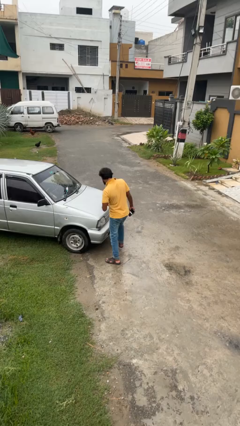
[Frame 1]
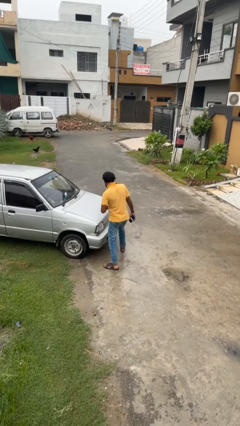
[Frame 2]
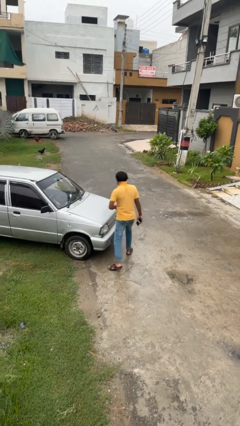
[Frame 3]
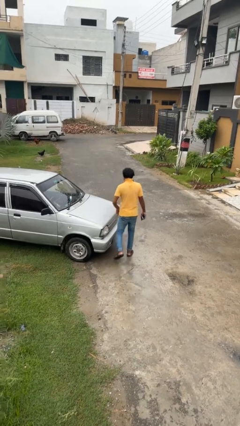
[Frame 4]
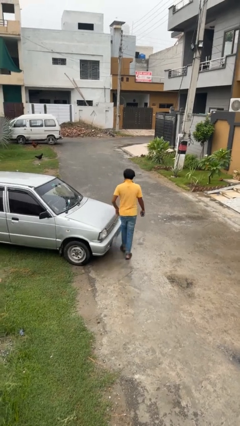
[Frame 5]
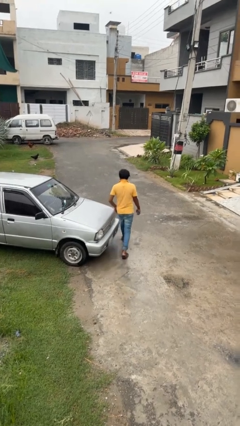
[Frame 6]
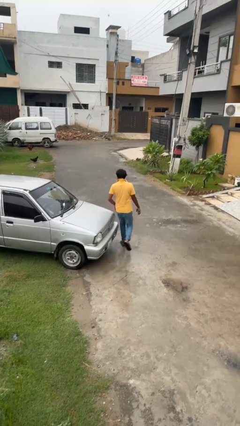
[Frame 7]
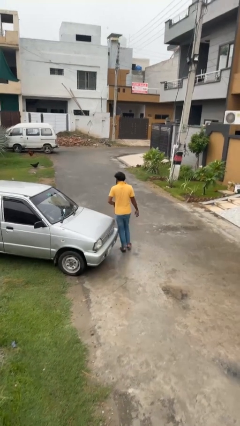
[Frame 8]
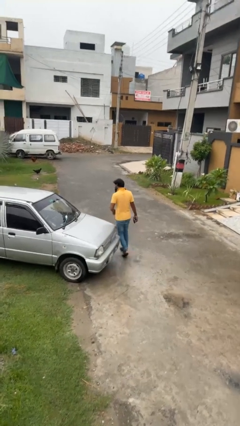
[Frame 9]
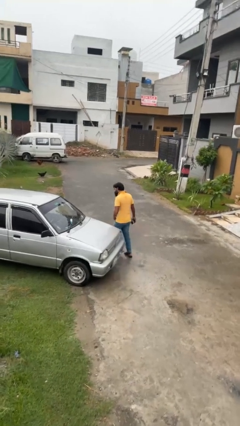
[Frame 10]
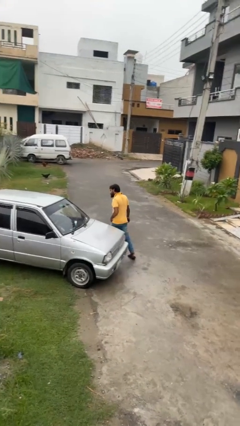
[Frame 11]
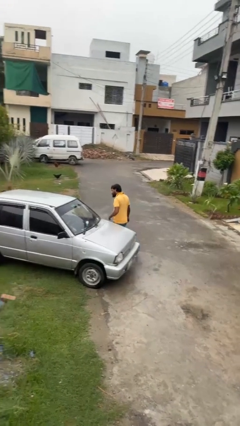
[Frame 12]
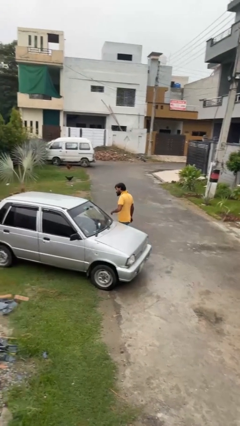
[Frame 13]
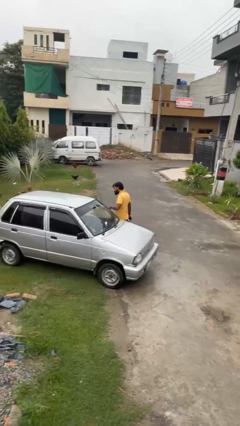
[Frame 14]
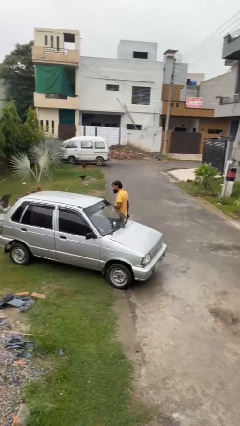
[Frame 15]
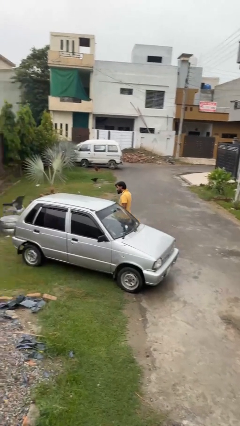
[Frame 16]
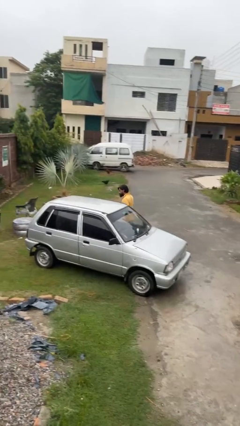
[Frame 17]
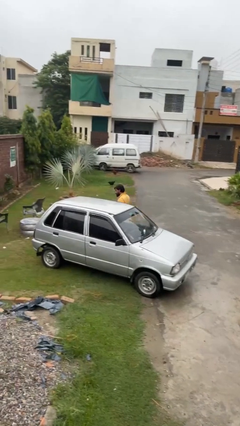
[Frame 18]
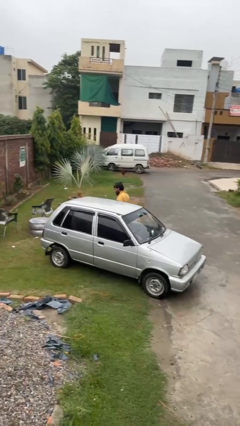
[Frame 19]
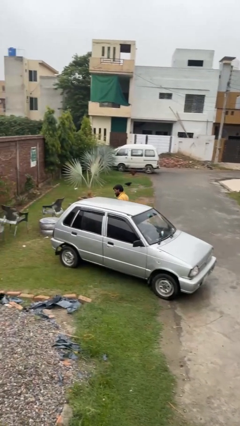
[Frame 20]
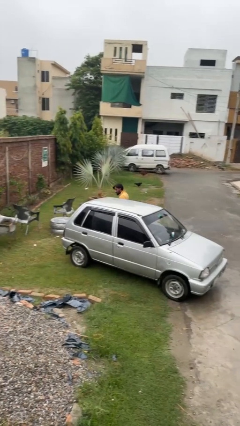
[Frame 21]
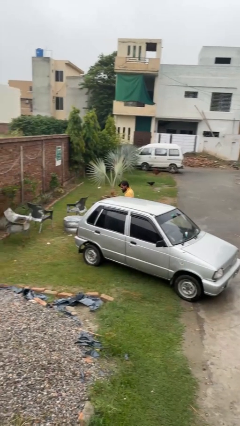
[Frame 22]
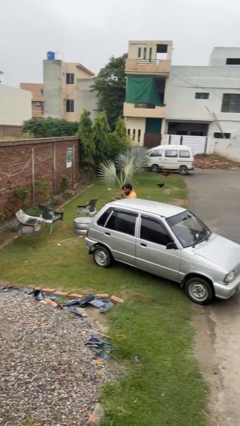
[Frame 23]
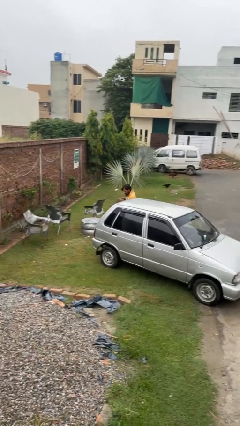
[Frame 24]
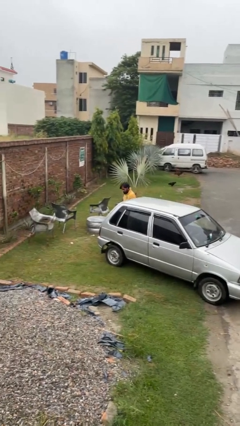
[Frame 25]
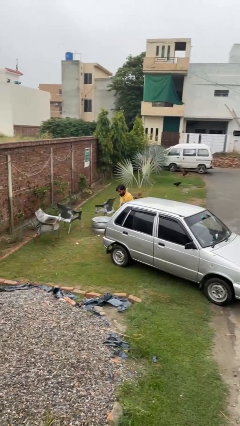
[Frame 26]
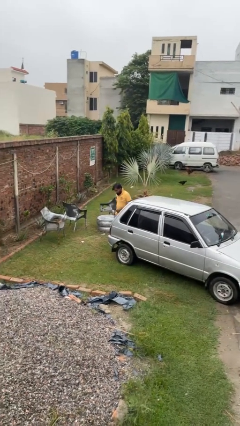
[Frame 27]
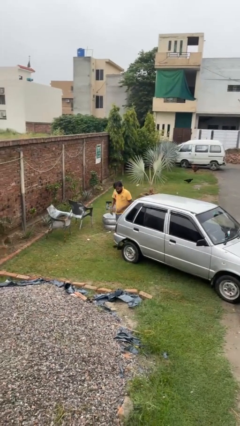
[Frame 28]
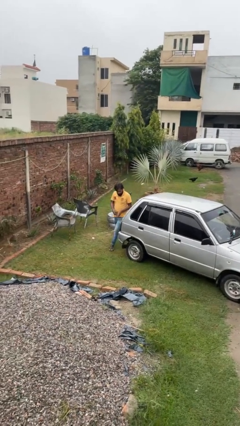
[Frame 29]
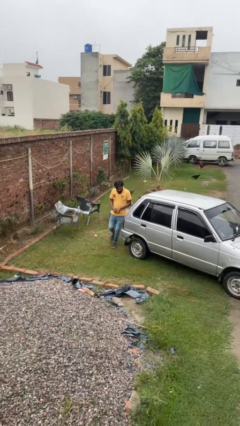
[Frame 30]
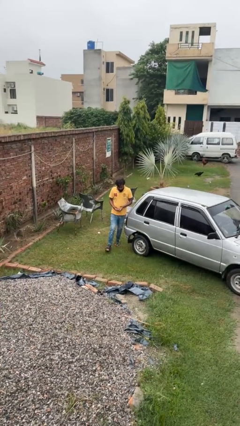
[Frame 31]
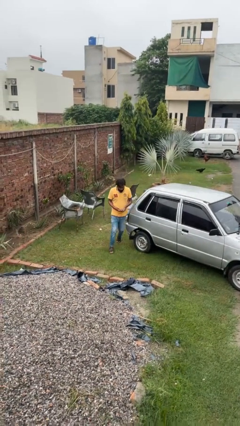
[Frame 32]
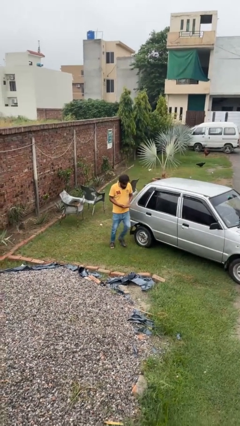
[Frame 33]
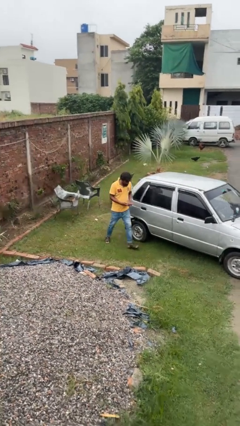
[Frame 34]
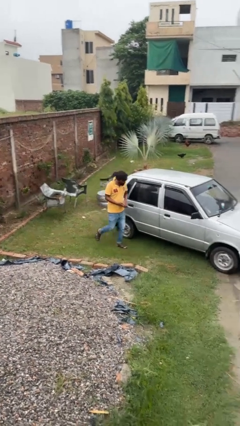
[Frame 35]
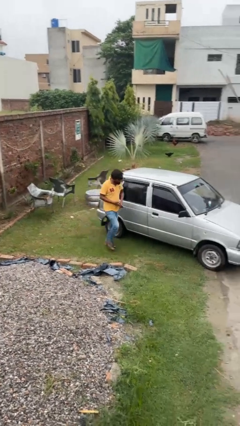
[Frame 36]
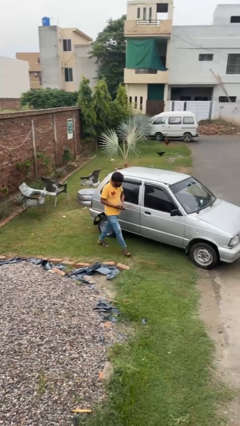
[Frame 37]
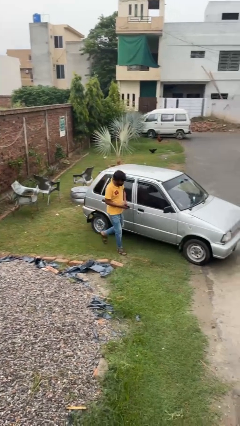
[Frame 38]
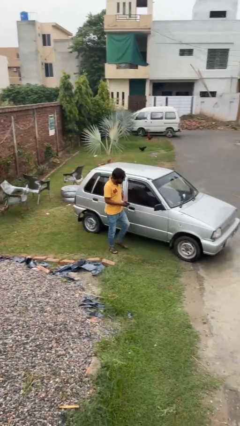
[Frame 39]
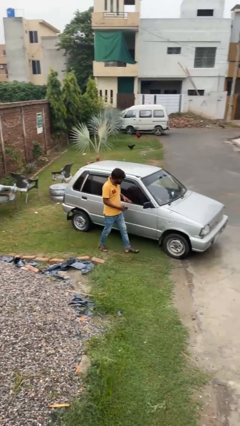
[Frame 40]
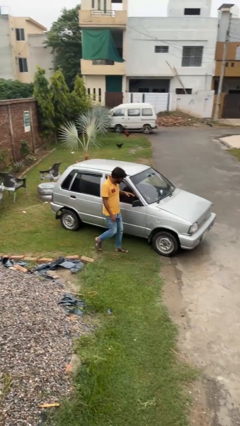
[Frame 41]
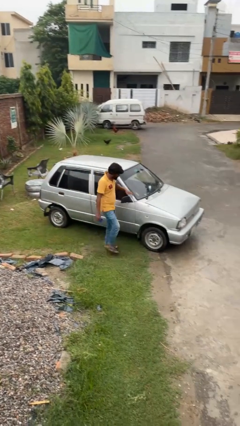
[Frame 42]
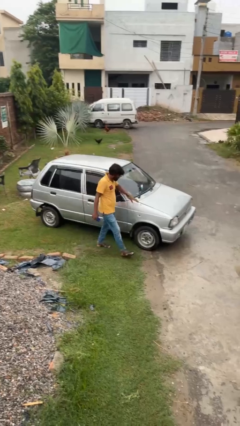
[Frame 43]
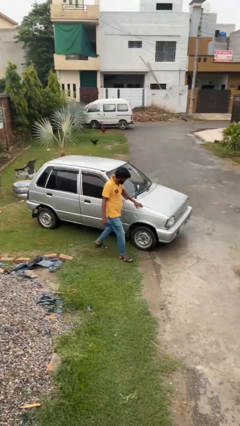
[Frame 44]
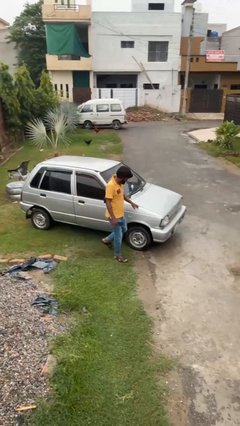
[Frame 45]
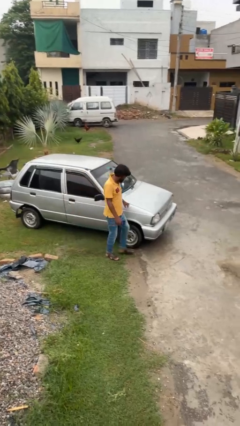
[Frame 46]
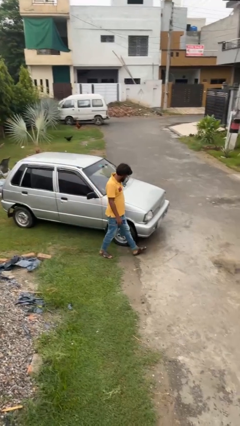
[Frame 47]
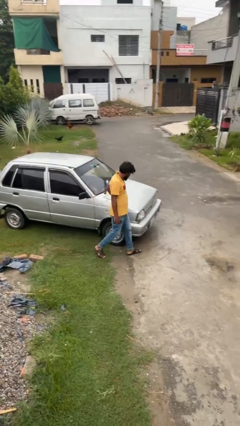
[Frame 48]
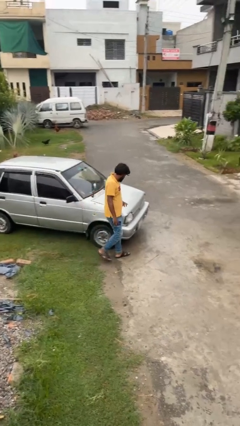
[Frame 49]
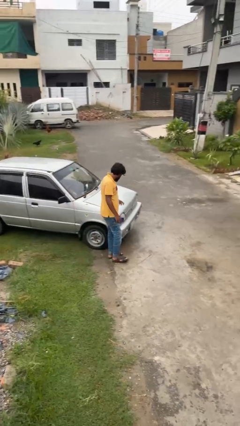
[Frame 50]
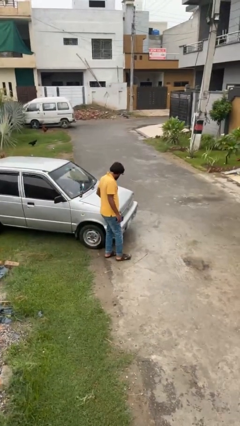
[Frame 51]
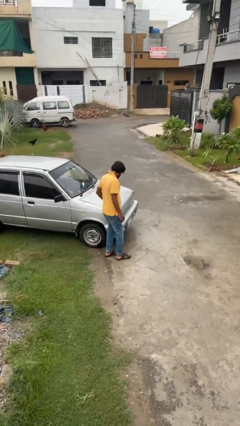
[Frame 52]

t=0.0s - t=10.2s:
person walks around car

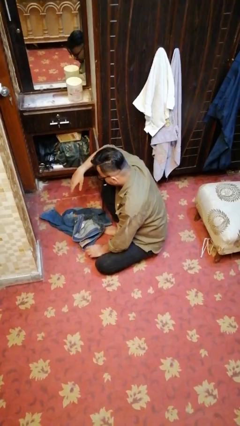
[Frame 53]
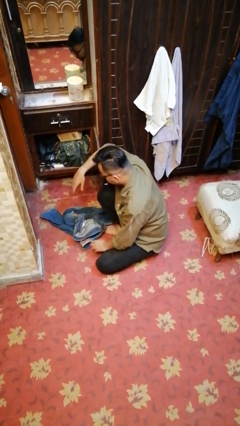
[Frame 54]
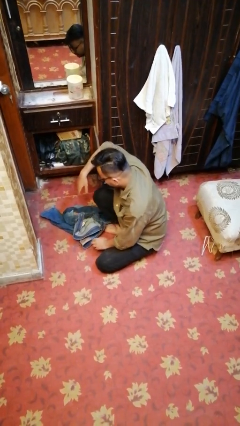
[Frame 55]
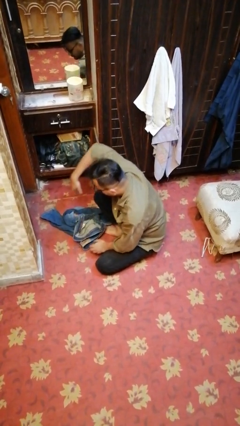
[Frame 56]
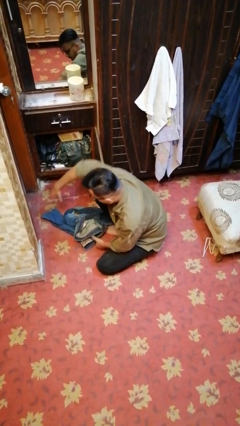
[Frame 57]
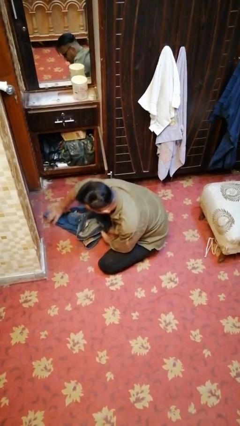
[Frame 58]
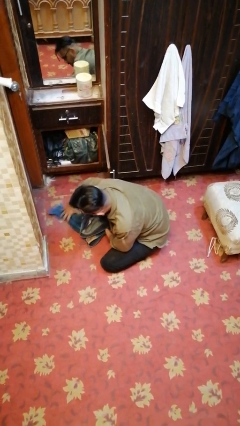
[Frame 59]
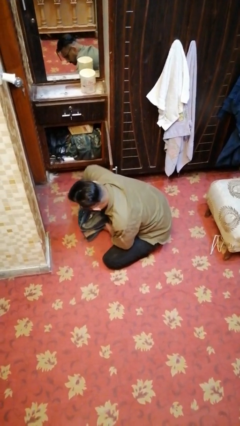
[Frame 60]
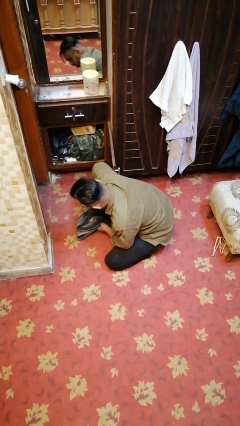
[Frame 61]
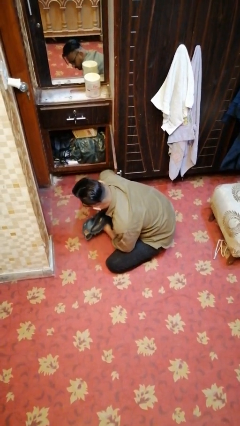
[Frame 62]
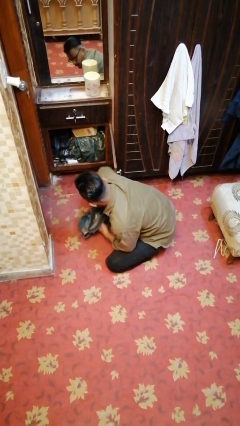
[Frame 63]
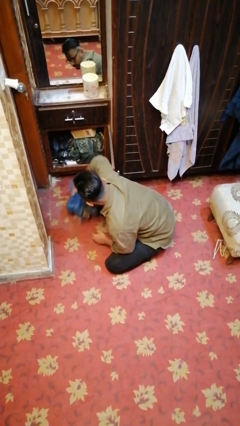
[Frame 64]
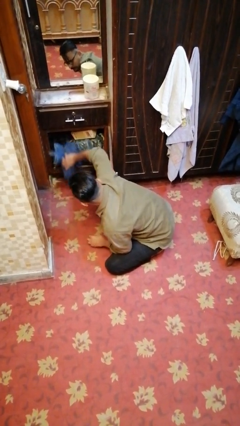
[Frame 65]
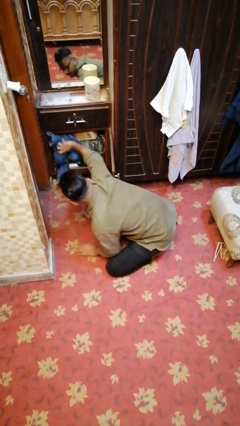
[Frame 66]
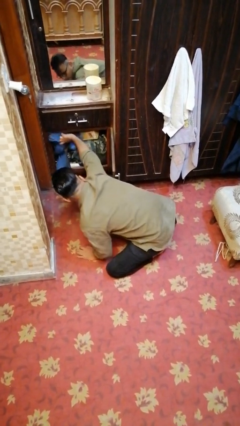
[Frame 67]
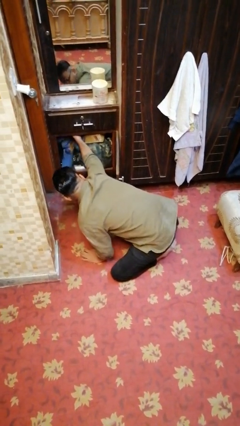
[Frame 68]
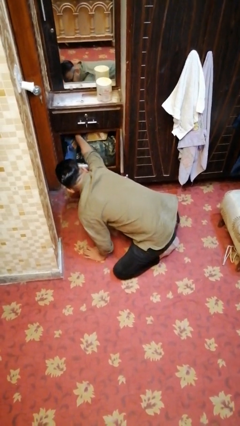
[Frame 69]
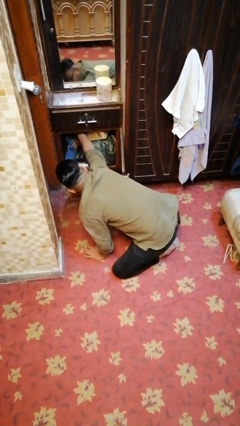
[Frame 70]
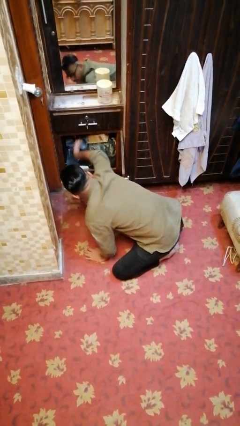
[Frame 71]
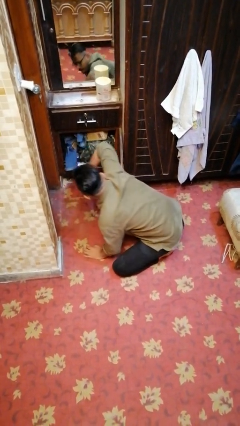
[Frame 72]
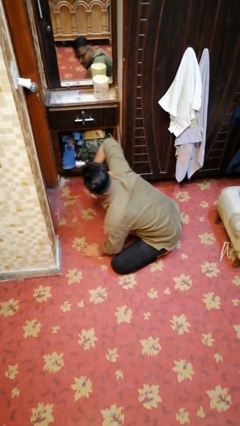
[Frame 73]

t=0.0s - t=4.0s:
person puts clothes into dresser

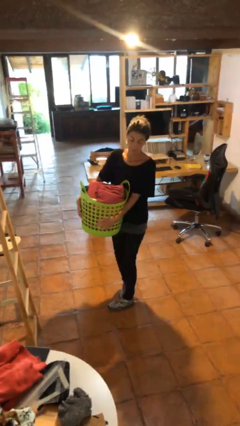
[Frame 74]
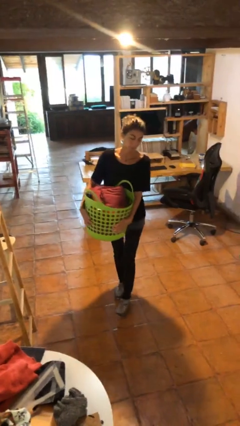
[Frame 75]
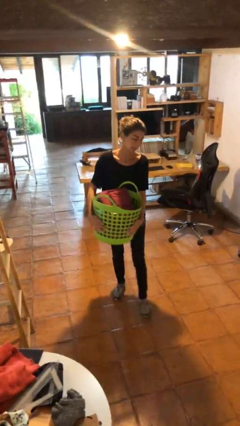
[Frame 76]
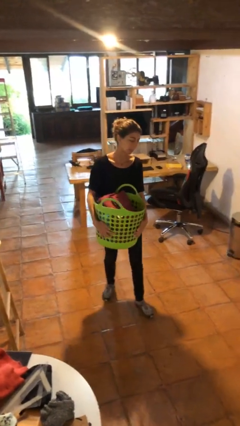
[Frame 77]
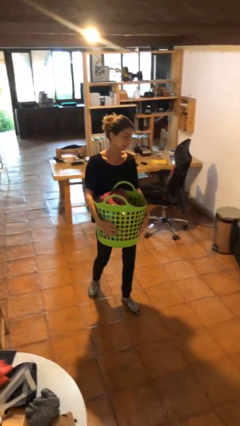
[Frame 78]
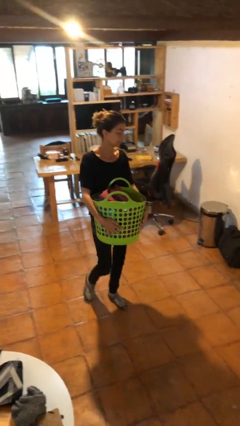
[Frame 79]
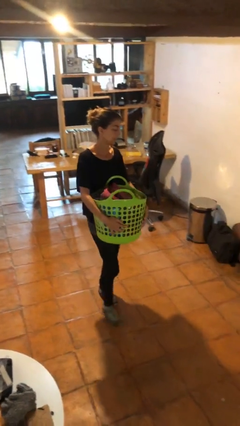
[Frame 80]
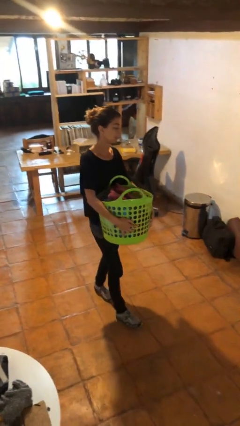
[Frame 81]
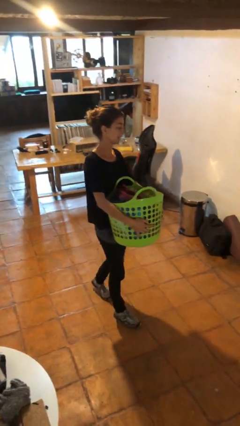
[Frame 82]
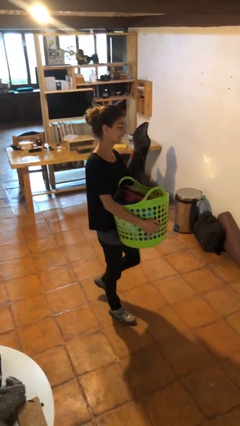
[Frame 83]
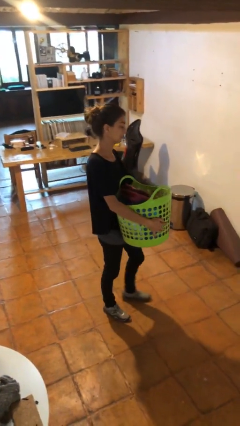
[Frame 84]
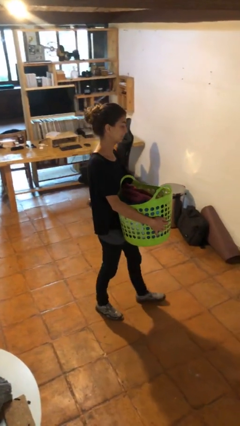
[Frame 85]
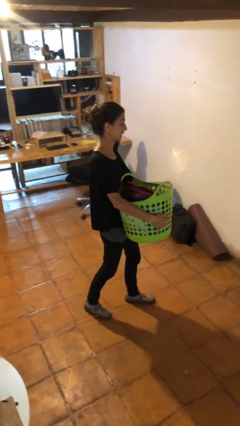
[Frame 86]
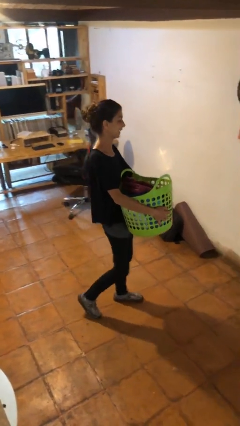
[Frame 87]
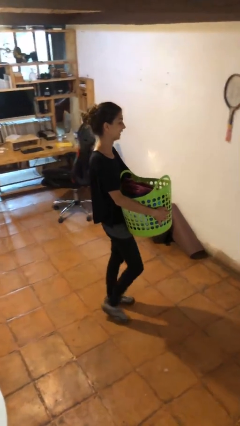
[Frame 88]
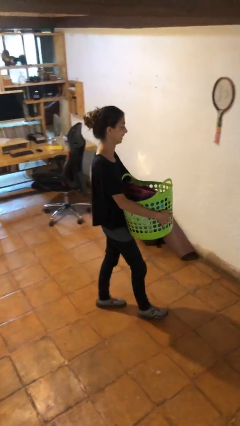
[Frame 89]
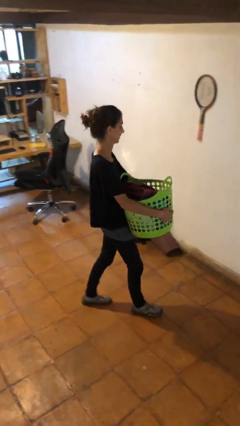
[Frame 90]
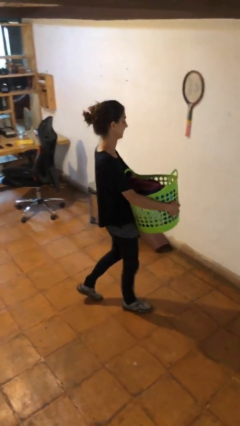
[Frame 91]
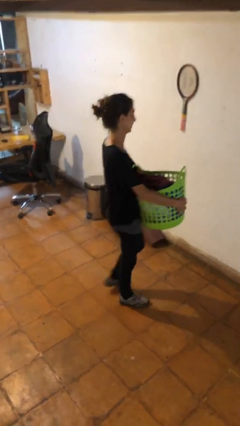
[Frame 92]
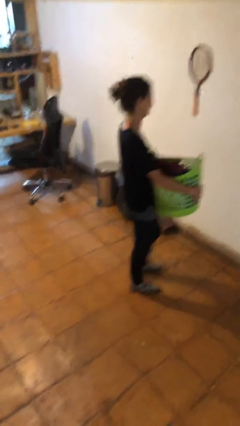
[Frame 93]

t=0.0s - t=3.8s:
person carries laundry basket
